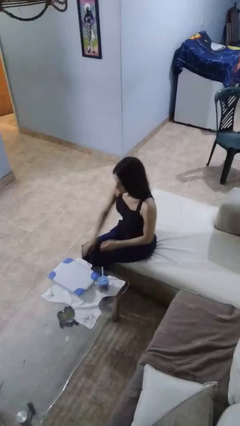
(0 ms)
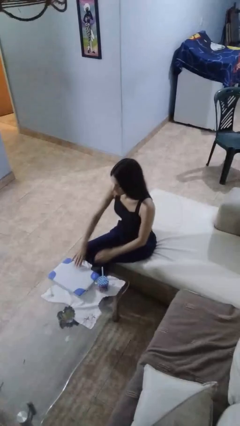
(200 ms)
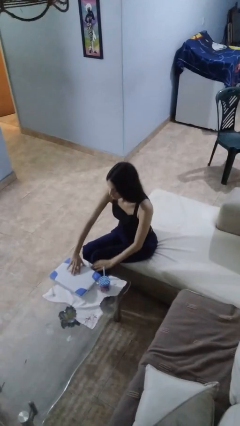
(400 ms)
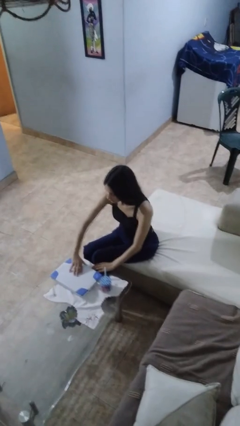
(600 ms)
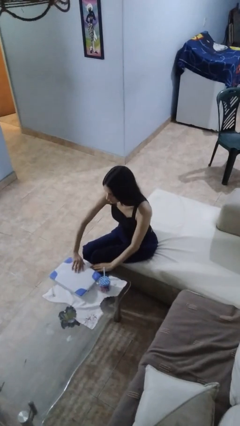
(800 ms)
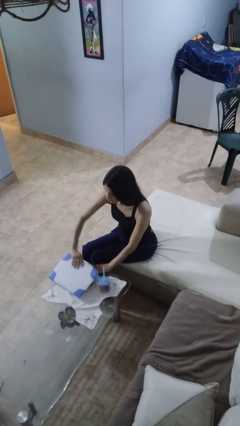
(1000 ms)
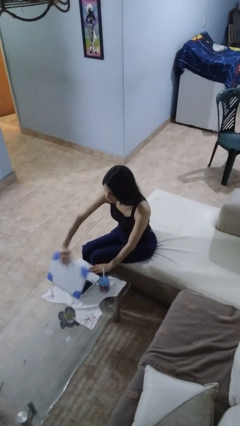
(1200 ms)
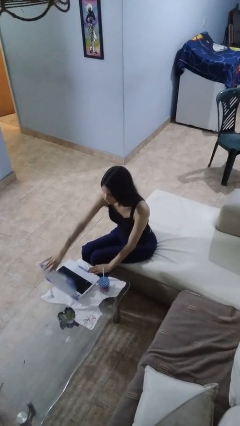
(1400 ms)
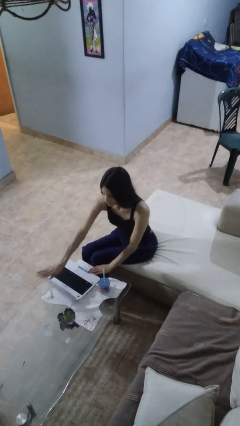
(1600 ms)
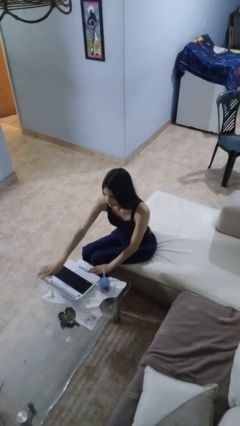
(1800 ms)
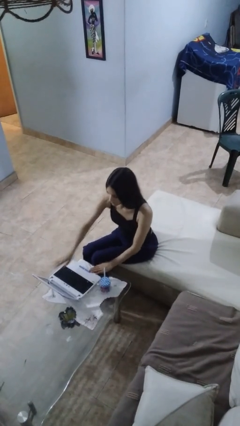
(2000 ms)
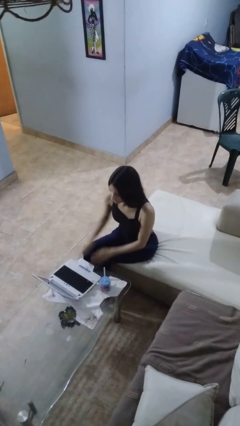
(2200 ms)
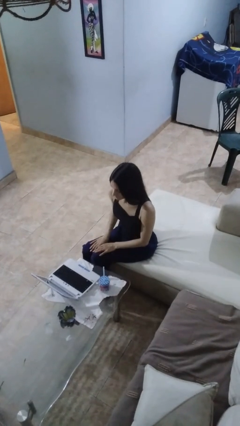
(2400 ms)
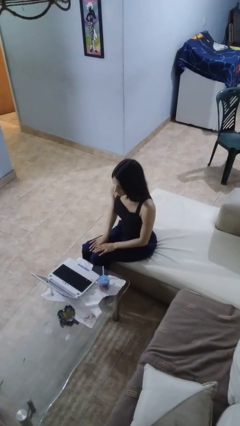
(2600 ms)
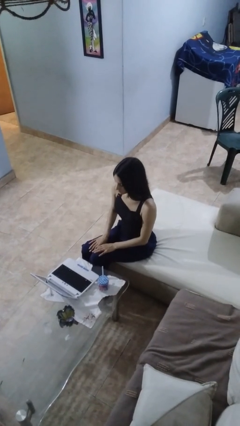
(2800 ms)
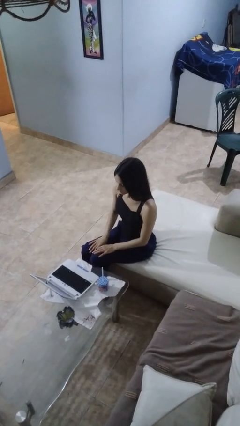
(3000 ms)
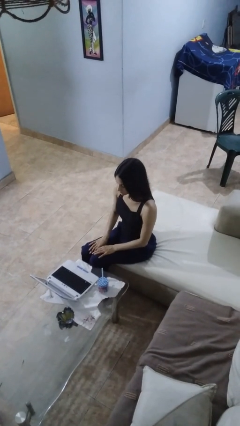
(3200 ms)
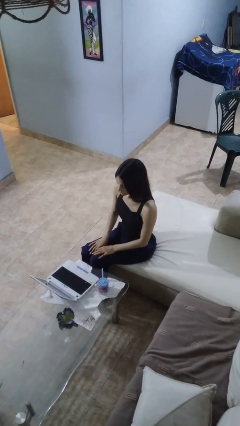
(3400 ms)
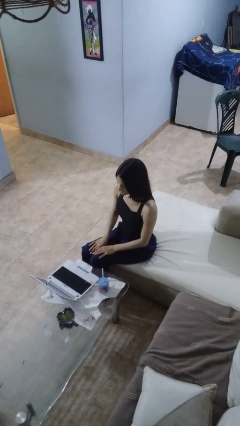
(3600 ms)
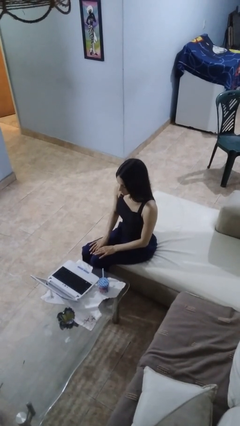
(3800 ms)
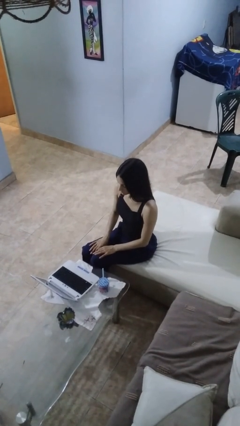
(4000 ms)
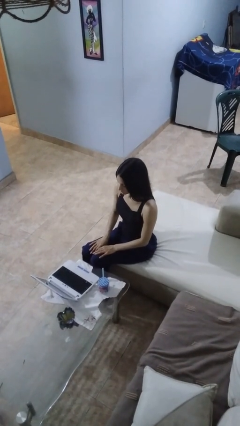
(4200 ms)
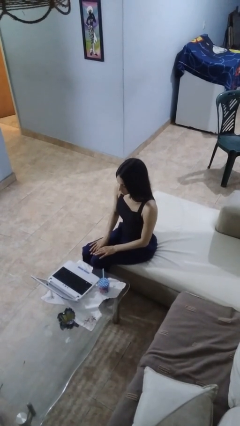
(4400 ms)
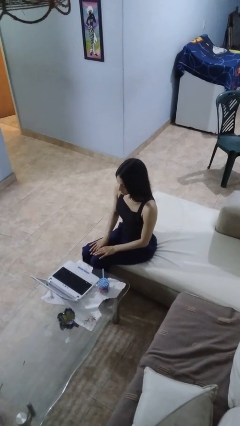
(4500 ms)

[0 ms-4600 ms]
person opens laptop

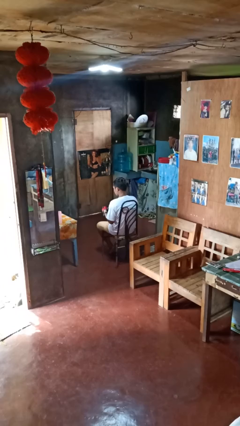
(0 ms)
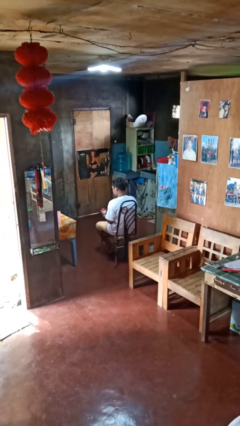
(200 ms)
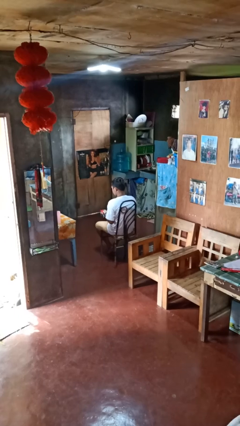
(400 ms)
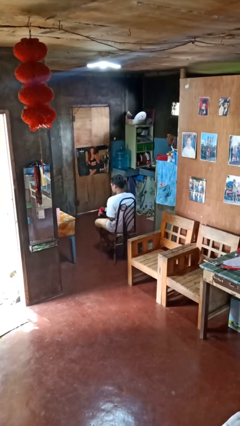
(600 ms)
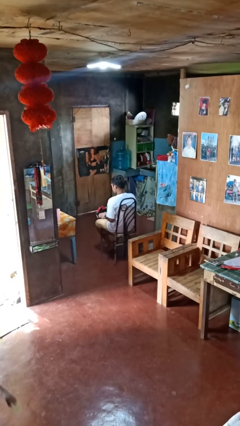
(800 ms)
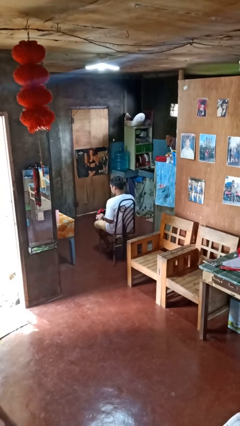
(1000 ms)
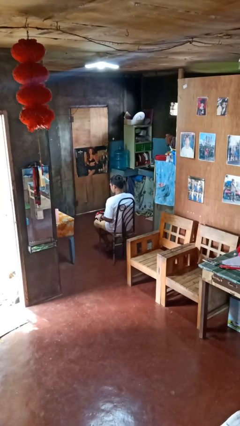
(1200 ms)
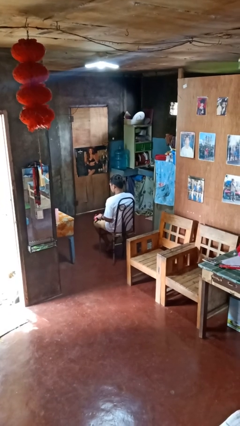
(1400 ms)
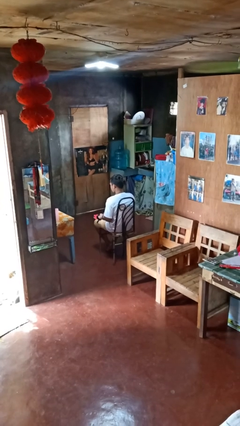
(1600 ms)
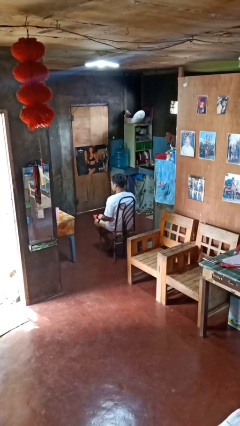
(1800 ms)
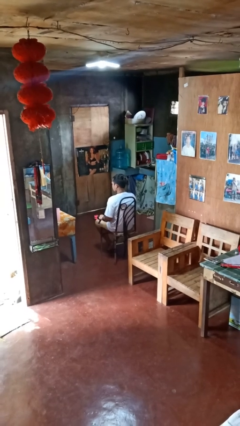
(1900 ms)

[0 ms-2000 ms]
person takes off gloves

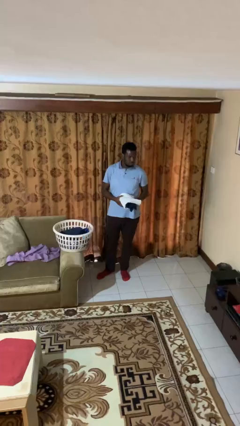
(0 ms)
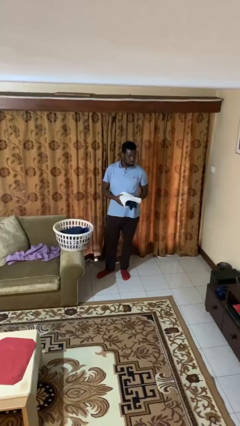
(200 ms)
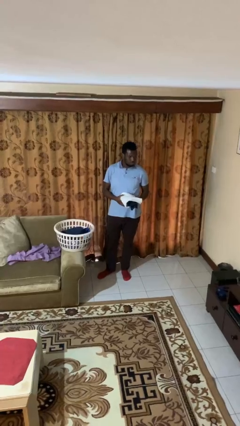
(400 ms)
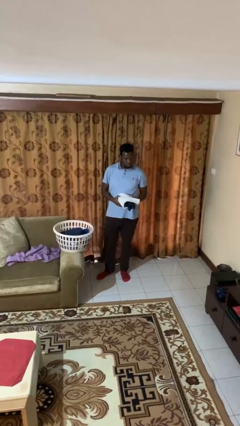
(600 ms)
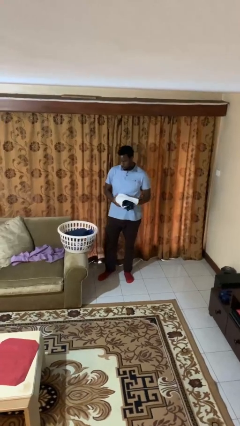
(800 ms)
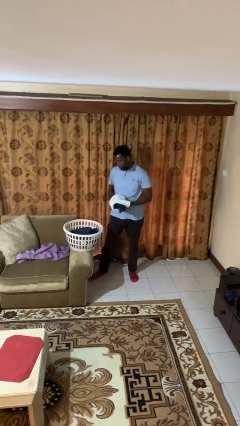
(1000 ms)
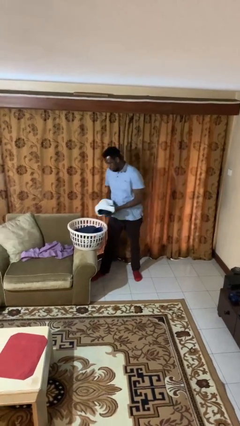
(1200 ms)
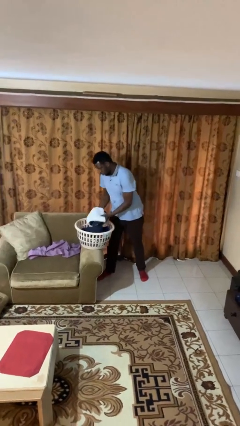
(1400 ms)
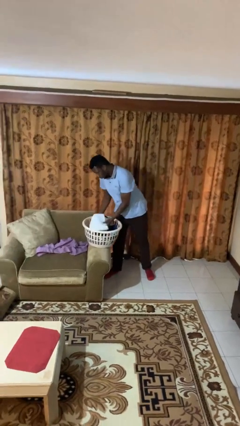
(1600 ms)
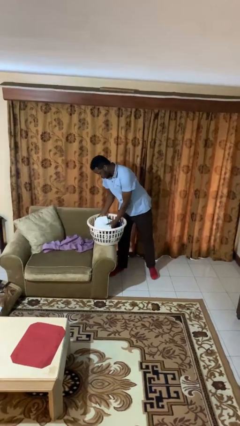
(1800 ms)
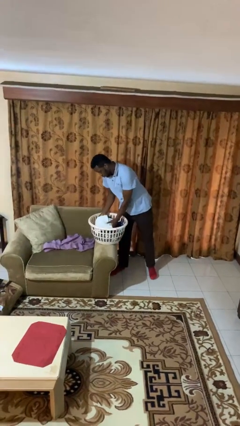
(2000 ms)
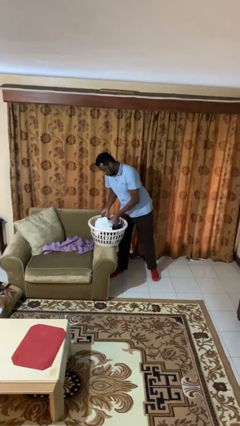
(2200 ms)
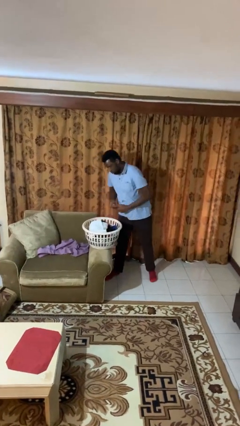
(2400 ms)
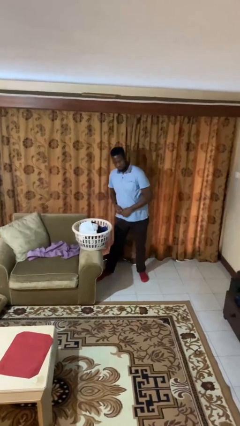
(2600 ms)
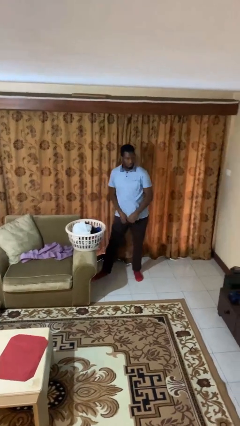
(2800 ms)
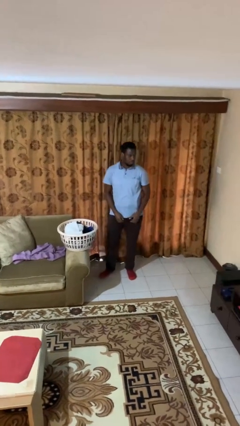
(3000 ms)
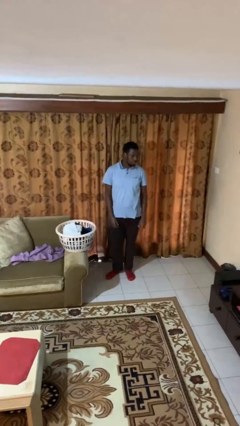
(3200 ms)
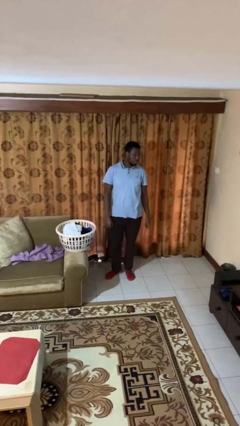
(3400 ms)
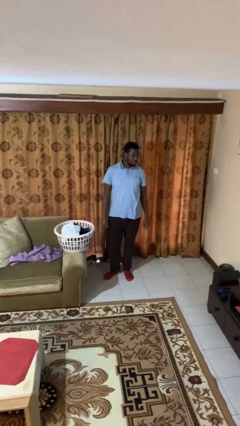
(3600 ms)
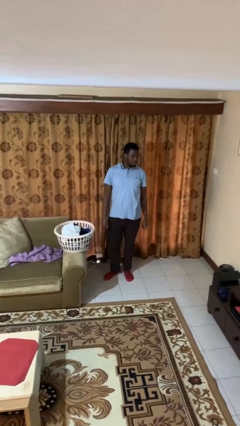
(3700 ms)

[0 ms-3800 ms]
person puts object into basket

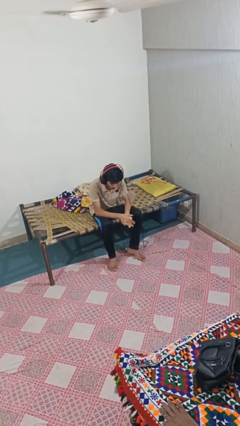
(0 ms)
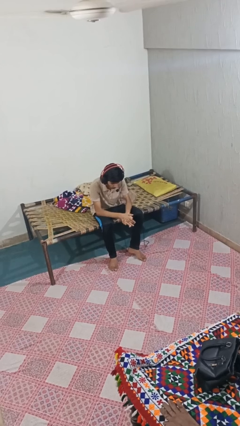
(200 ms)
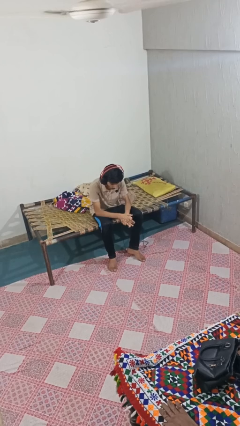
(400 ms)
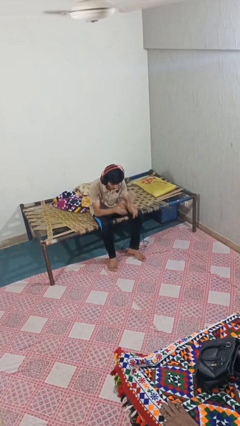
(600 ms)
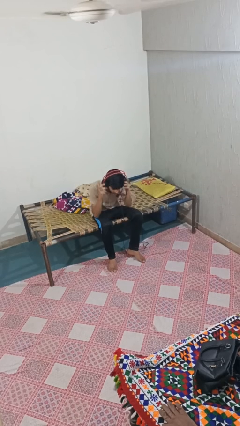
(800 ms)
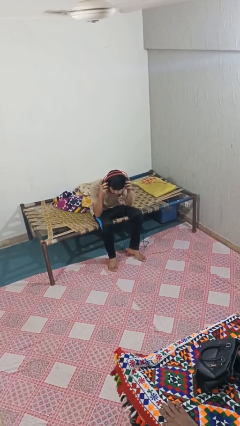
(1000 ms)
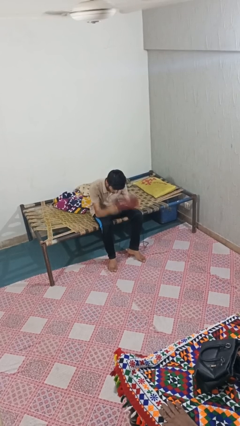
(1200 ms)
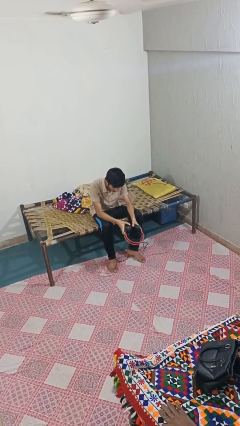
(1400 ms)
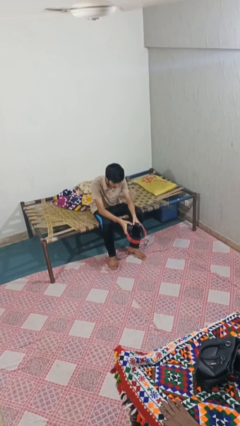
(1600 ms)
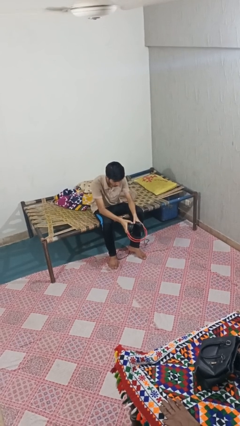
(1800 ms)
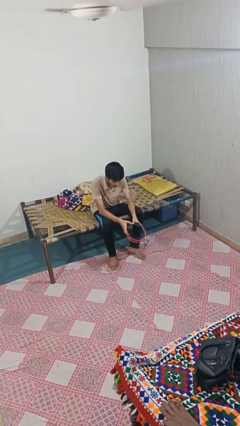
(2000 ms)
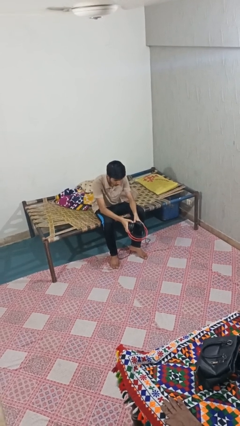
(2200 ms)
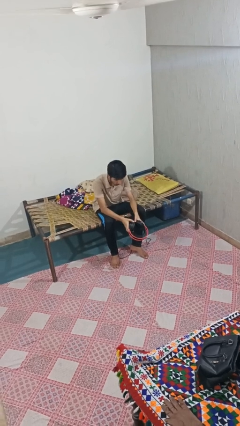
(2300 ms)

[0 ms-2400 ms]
person takes off headphones

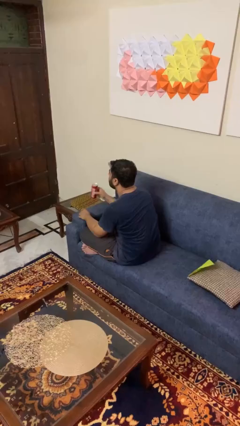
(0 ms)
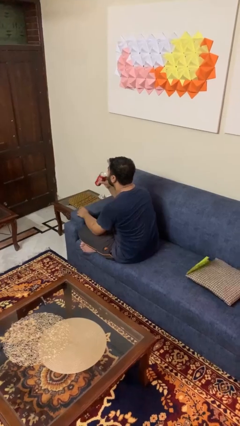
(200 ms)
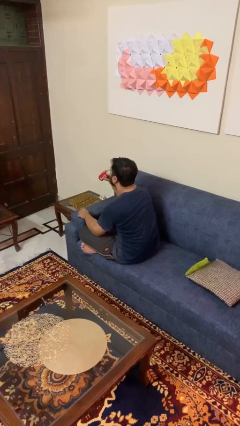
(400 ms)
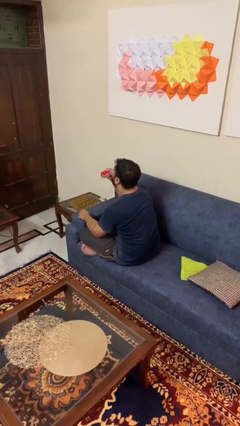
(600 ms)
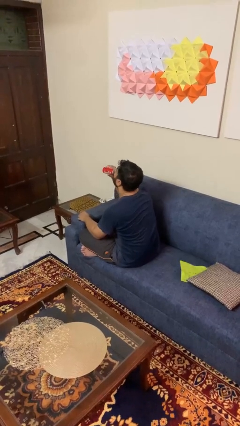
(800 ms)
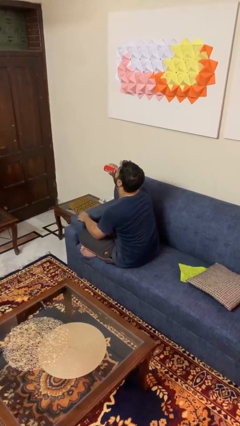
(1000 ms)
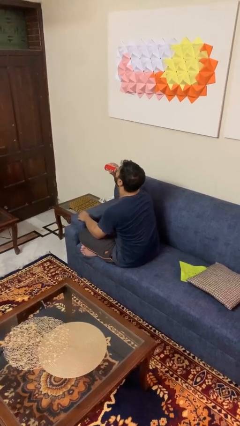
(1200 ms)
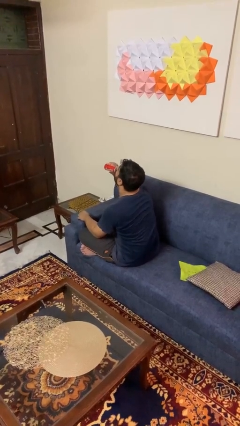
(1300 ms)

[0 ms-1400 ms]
person drinks from beverage can

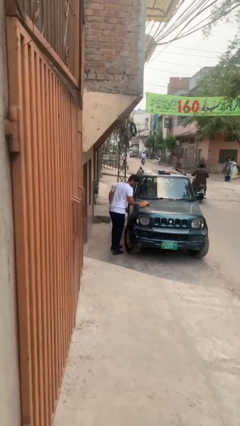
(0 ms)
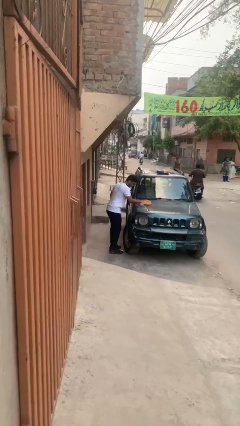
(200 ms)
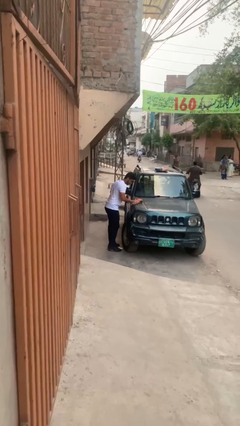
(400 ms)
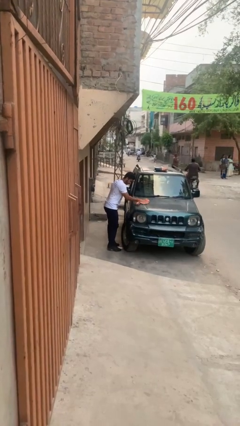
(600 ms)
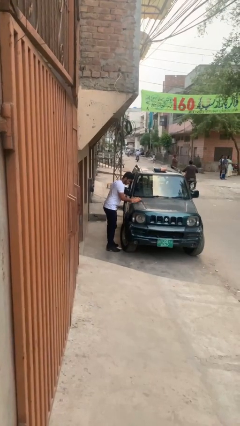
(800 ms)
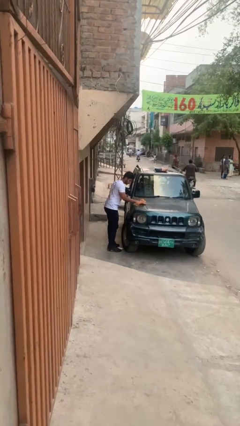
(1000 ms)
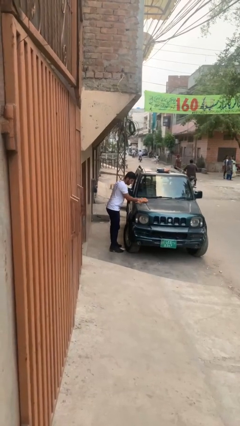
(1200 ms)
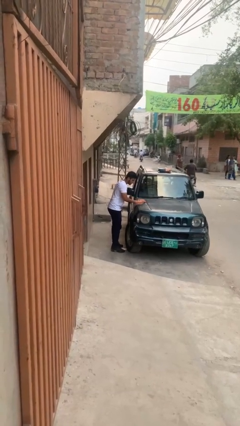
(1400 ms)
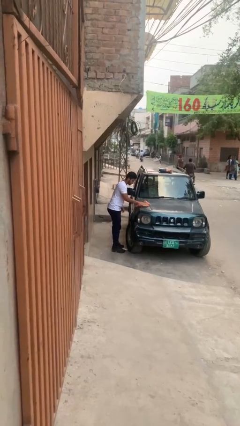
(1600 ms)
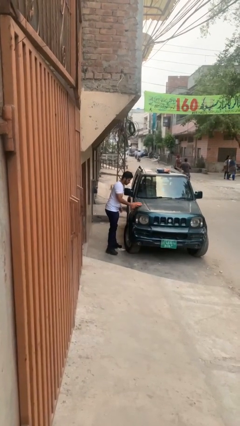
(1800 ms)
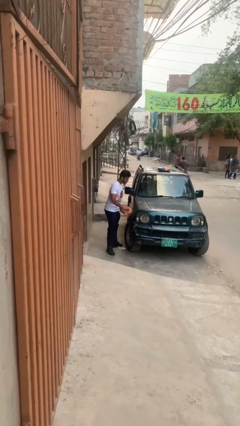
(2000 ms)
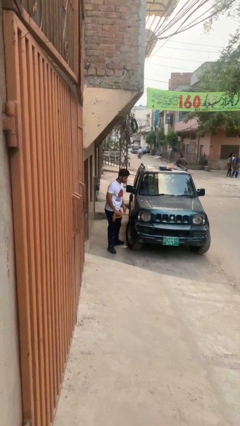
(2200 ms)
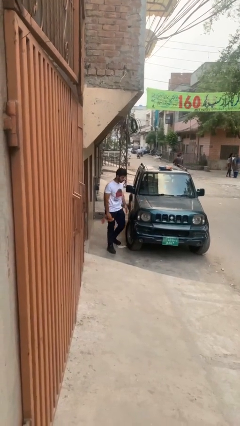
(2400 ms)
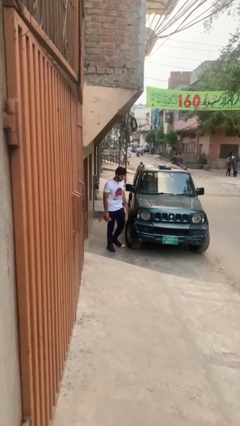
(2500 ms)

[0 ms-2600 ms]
person polishes car with rag

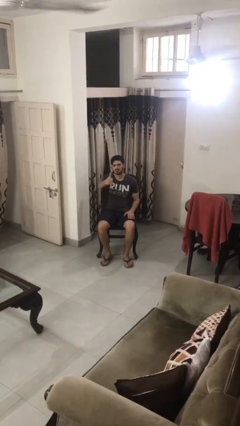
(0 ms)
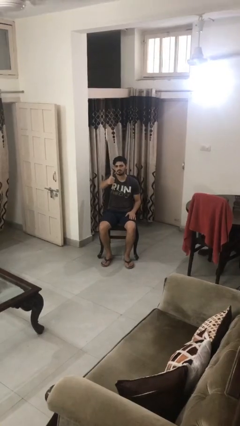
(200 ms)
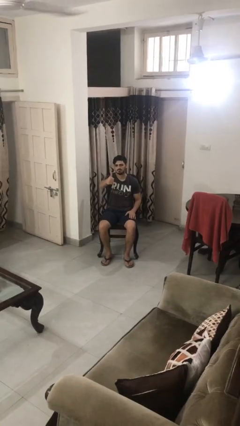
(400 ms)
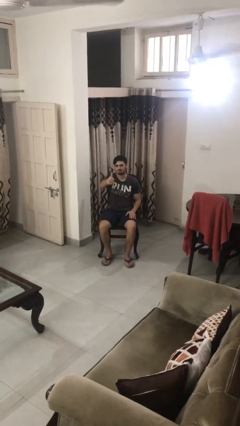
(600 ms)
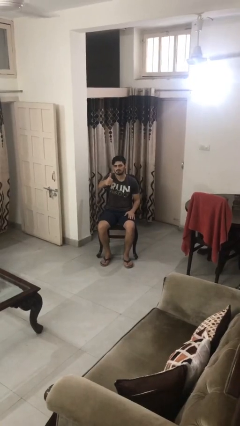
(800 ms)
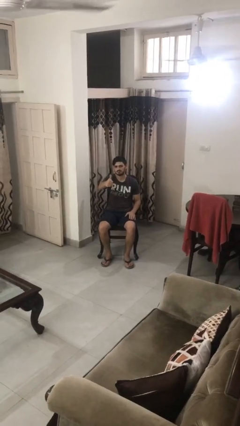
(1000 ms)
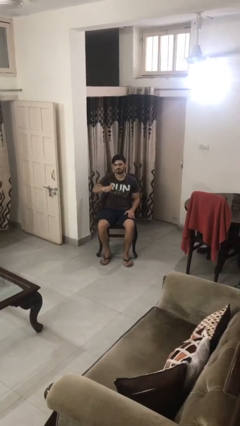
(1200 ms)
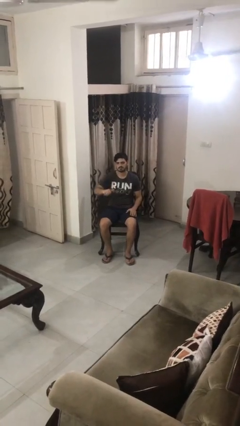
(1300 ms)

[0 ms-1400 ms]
person gestures thumbs up
